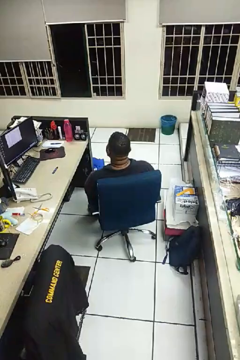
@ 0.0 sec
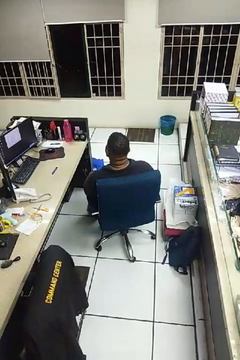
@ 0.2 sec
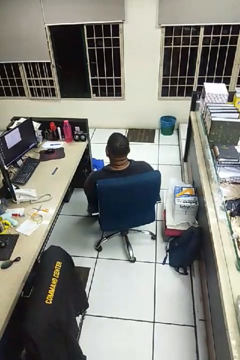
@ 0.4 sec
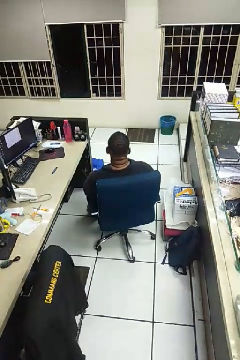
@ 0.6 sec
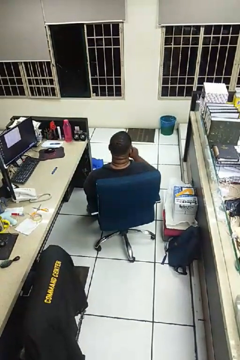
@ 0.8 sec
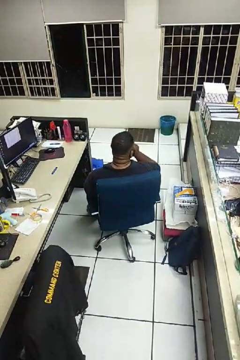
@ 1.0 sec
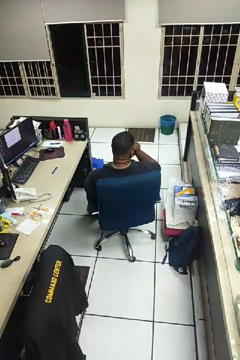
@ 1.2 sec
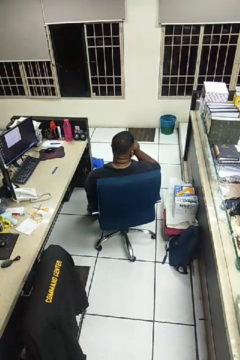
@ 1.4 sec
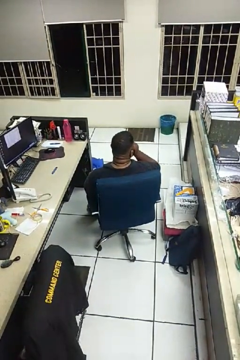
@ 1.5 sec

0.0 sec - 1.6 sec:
person gestures be quiet

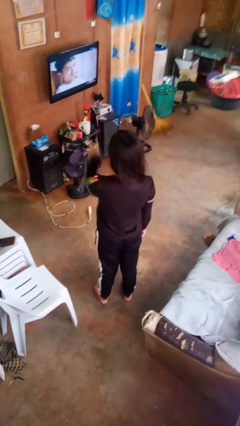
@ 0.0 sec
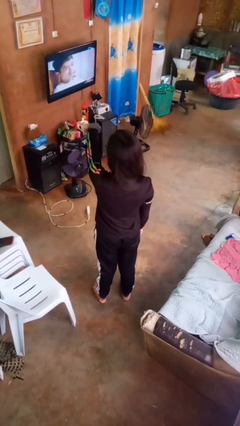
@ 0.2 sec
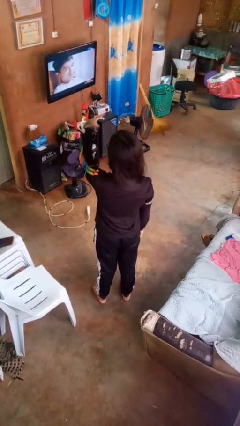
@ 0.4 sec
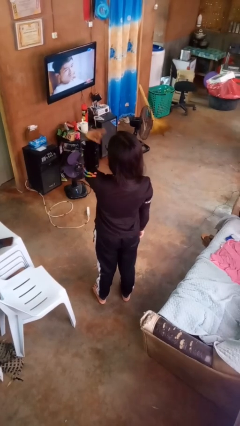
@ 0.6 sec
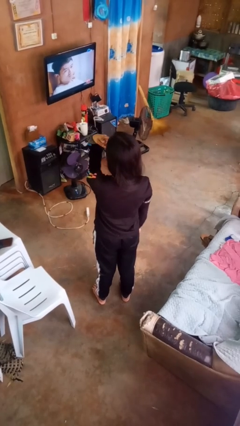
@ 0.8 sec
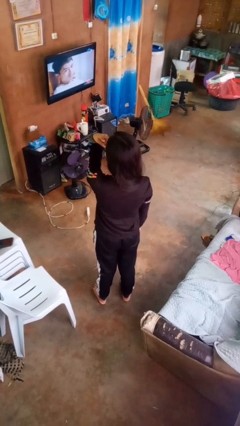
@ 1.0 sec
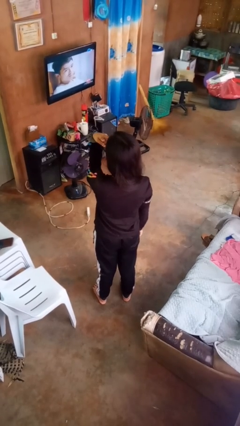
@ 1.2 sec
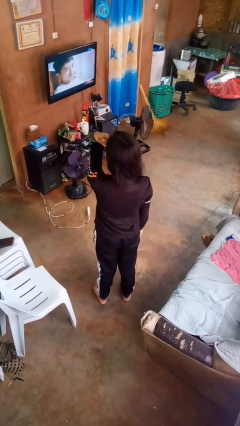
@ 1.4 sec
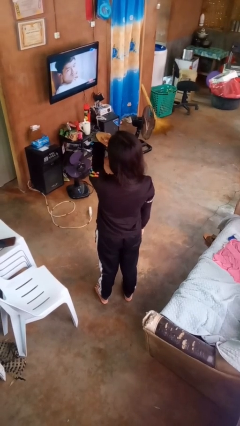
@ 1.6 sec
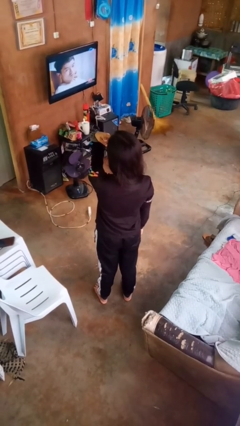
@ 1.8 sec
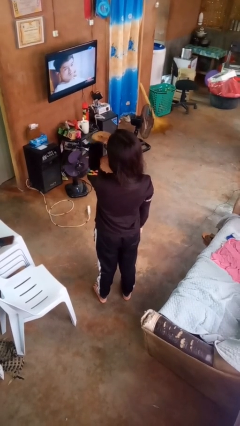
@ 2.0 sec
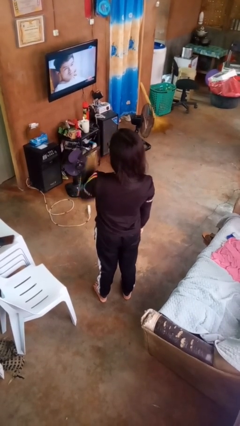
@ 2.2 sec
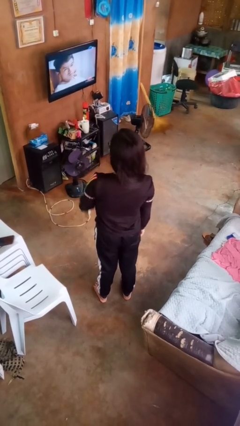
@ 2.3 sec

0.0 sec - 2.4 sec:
person gestures watch closely

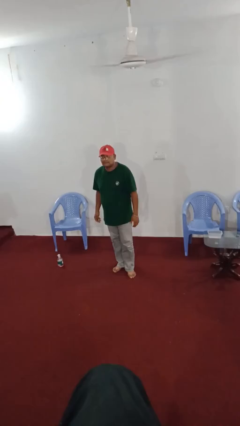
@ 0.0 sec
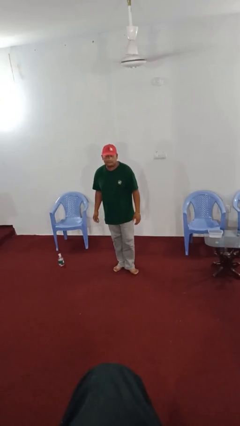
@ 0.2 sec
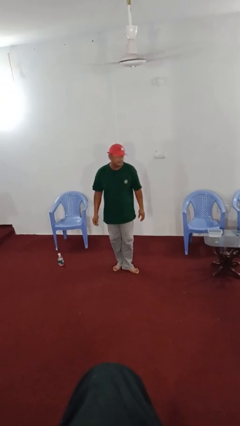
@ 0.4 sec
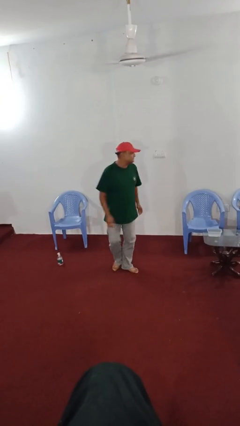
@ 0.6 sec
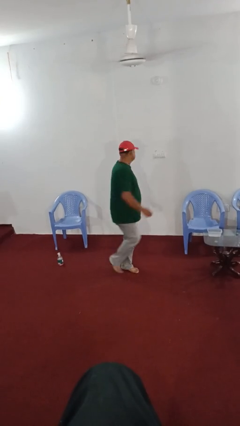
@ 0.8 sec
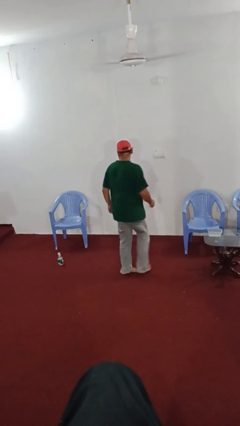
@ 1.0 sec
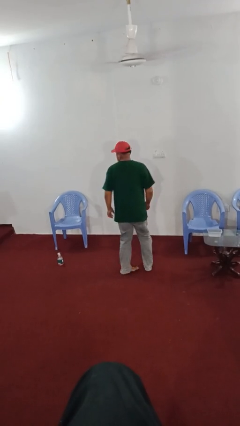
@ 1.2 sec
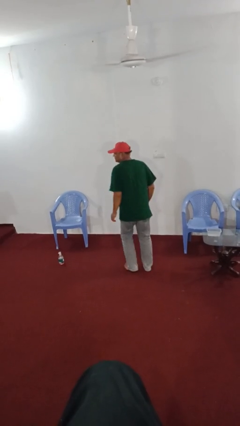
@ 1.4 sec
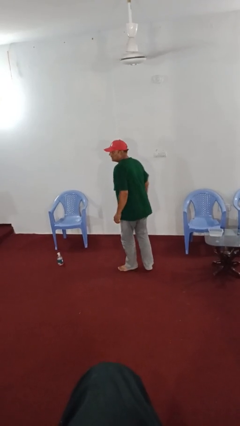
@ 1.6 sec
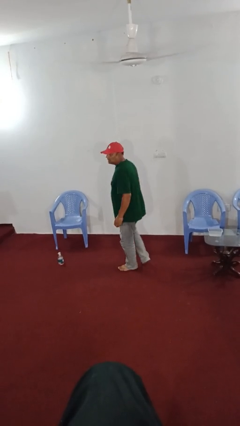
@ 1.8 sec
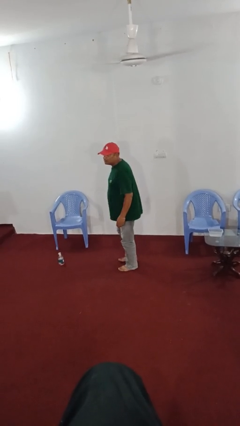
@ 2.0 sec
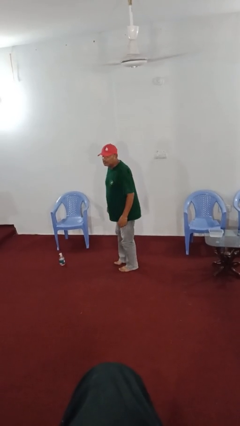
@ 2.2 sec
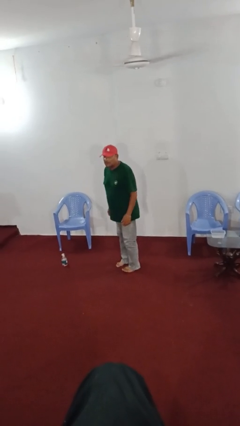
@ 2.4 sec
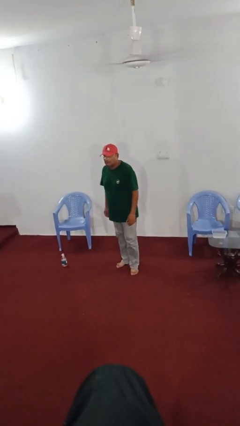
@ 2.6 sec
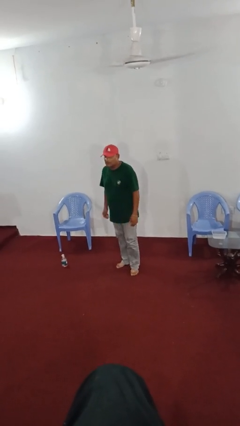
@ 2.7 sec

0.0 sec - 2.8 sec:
person twirls

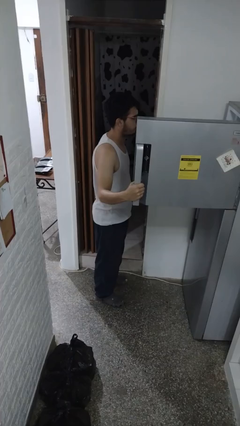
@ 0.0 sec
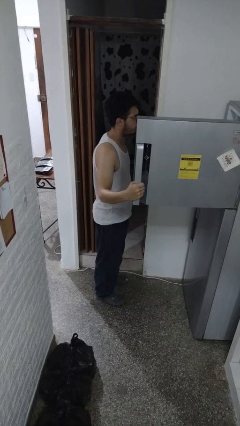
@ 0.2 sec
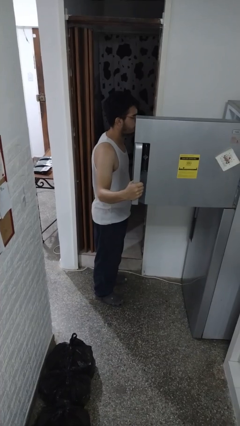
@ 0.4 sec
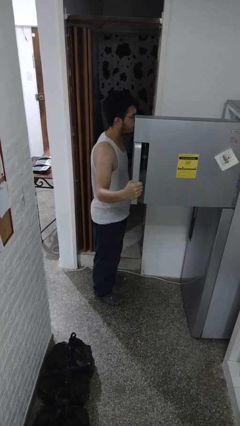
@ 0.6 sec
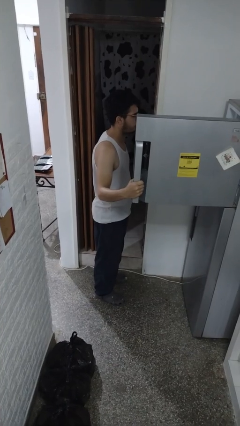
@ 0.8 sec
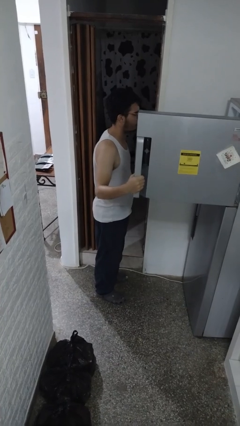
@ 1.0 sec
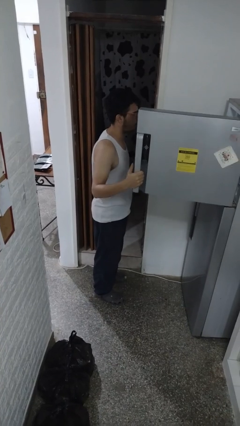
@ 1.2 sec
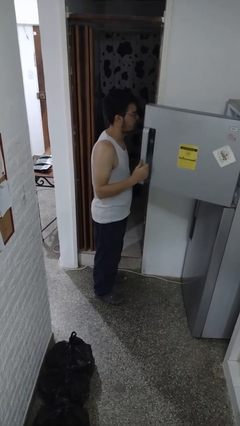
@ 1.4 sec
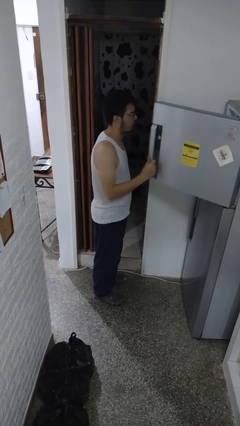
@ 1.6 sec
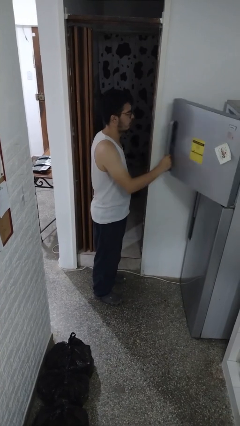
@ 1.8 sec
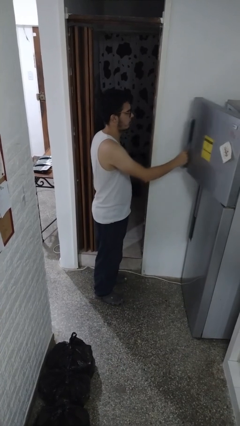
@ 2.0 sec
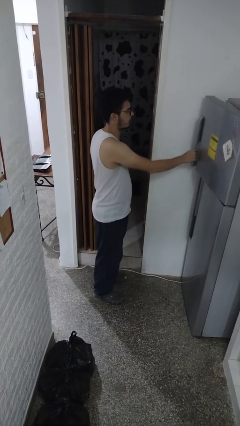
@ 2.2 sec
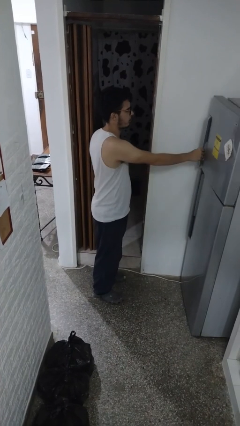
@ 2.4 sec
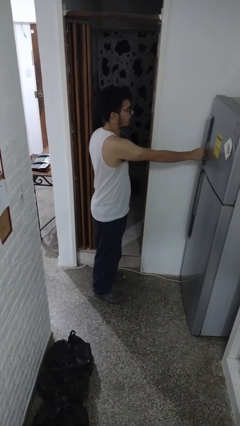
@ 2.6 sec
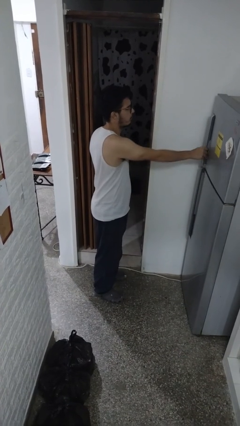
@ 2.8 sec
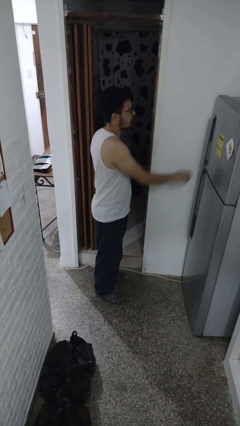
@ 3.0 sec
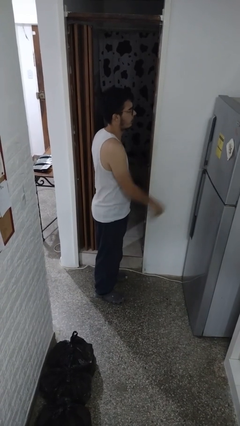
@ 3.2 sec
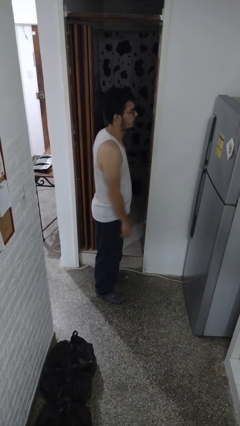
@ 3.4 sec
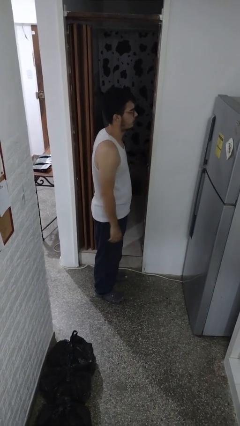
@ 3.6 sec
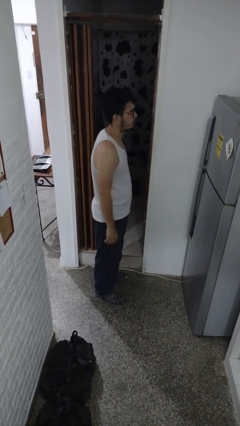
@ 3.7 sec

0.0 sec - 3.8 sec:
person closes refrigerator

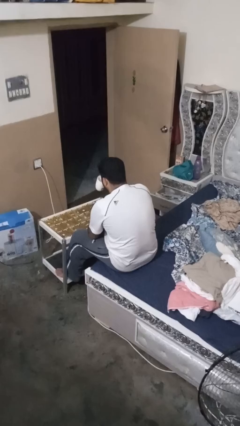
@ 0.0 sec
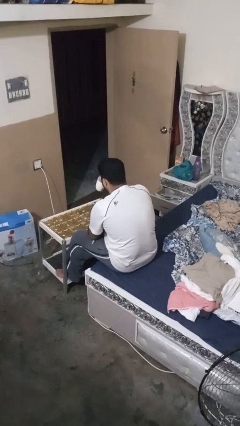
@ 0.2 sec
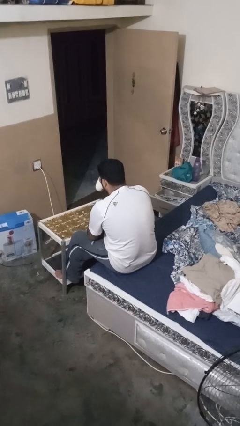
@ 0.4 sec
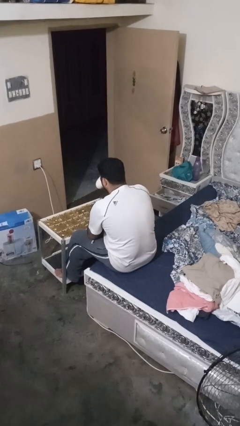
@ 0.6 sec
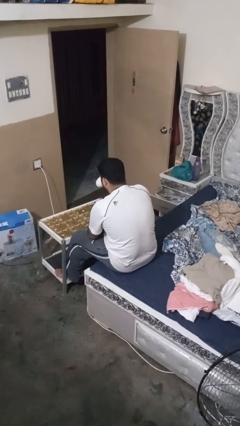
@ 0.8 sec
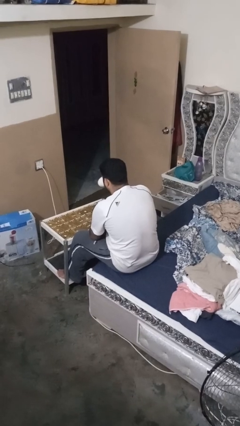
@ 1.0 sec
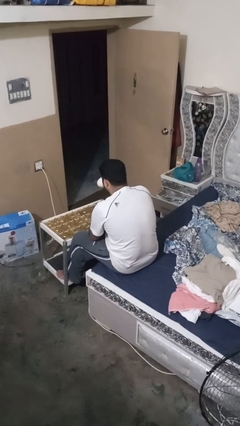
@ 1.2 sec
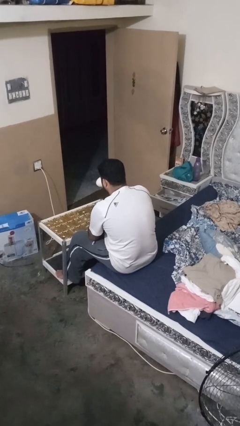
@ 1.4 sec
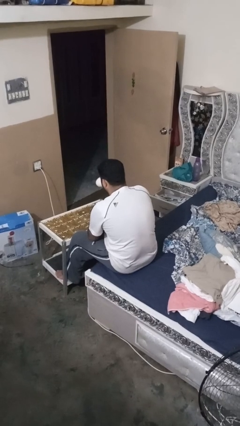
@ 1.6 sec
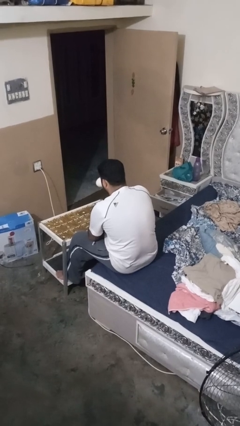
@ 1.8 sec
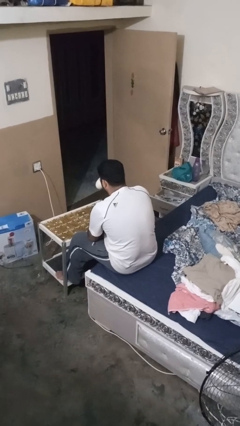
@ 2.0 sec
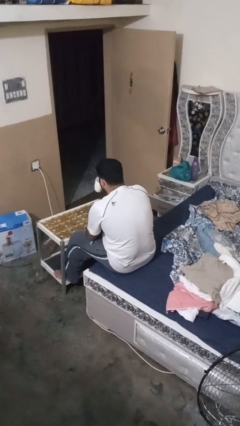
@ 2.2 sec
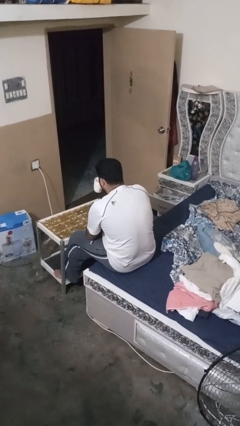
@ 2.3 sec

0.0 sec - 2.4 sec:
person drinks from mug

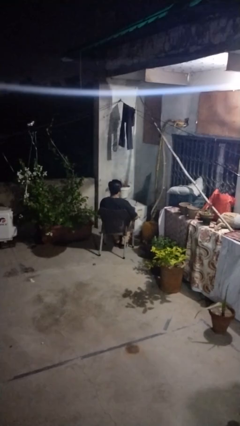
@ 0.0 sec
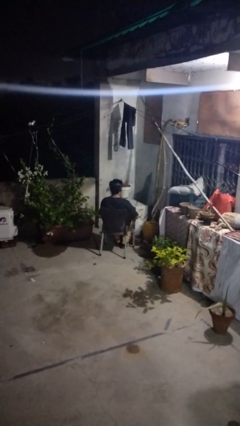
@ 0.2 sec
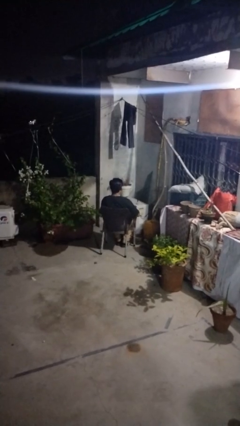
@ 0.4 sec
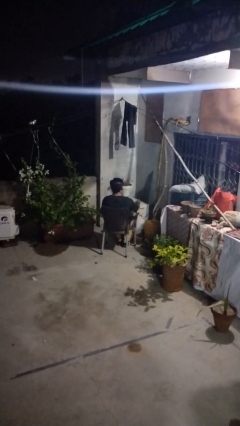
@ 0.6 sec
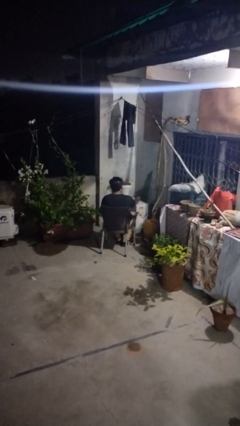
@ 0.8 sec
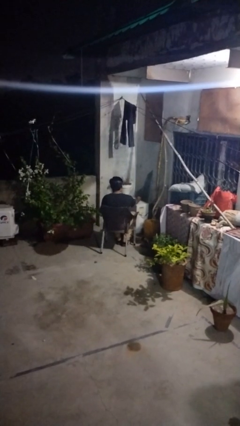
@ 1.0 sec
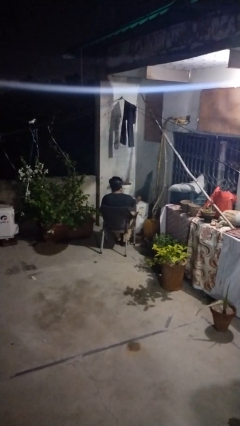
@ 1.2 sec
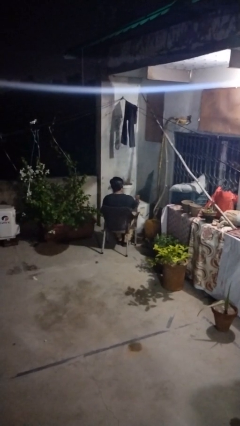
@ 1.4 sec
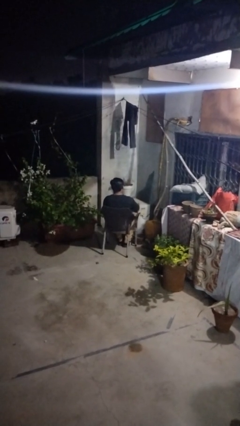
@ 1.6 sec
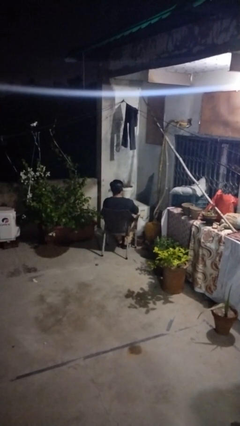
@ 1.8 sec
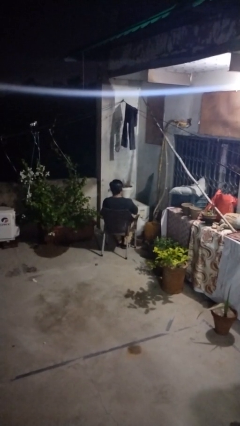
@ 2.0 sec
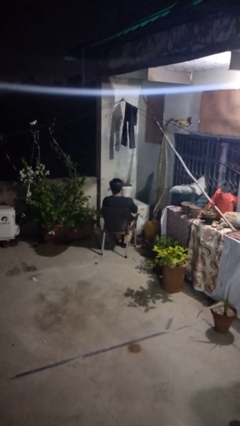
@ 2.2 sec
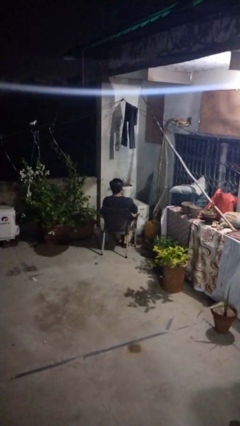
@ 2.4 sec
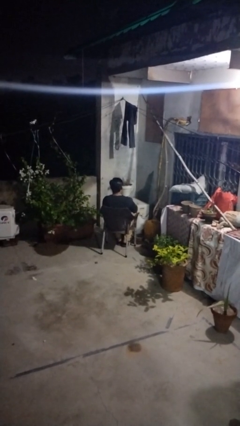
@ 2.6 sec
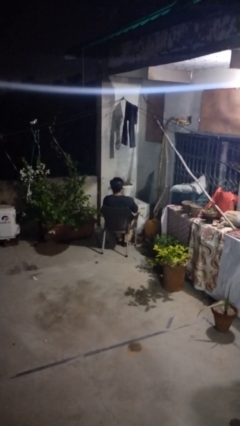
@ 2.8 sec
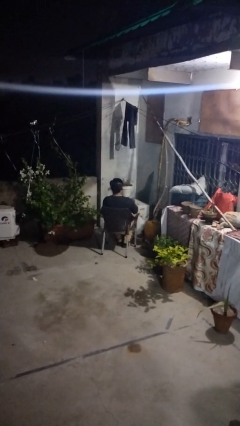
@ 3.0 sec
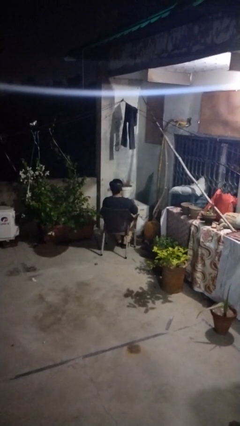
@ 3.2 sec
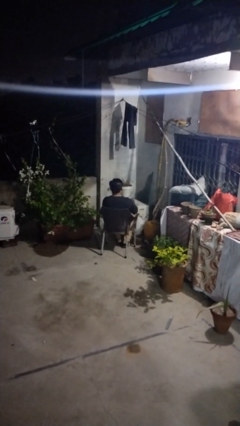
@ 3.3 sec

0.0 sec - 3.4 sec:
person paints fingernails

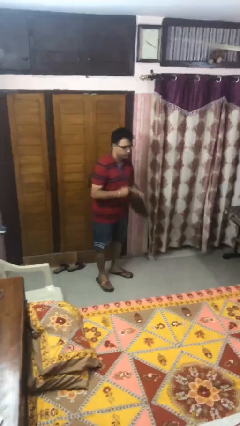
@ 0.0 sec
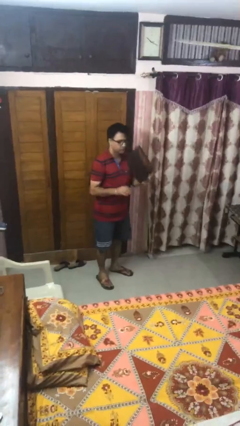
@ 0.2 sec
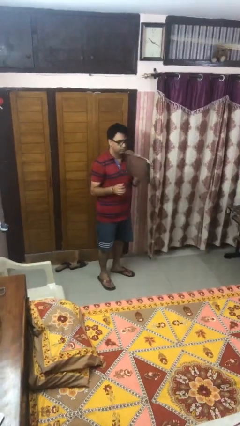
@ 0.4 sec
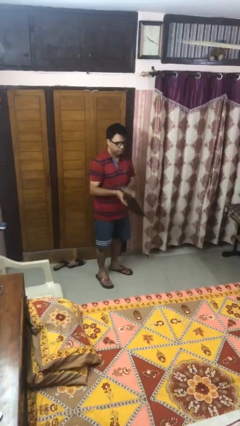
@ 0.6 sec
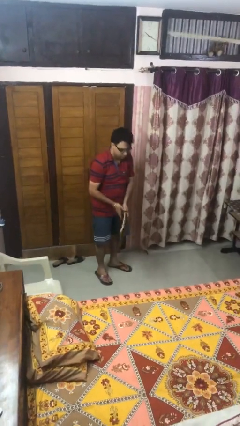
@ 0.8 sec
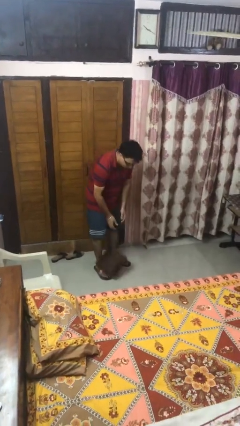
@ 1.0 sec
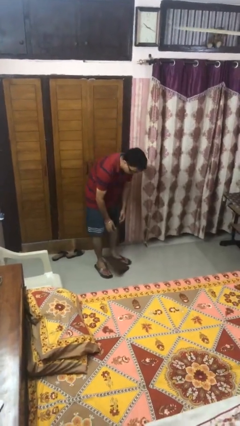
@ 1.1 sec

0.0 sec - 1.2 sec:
person drops object
